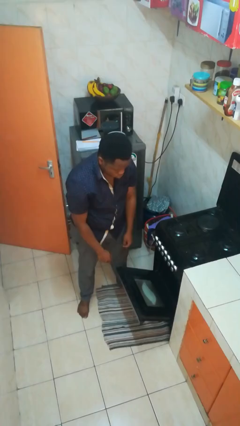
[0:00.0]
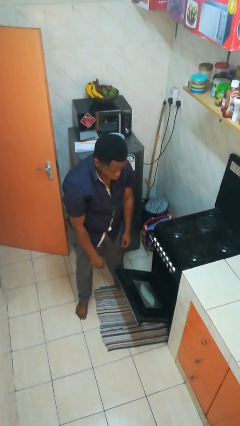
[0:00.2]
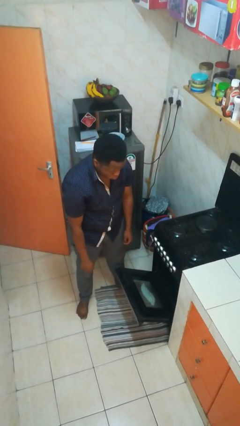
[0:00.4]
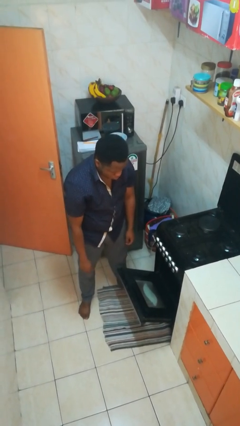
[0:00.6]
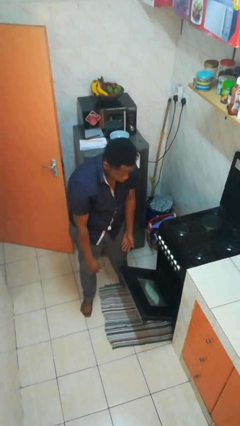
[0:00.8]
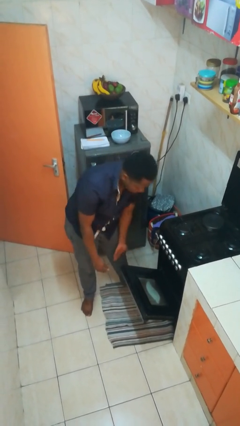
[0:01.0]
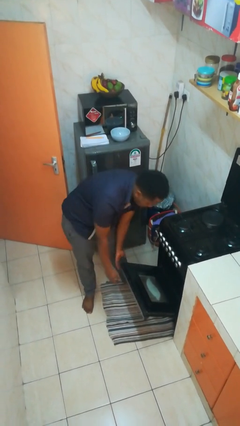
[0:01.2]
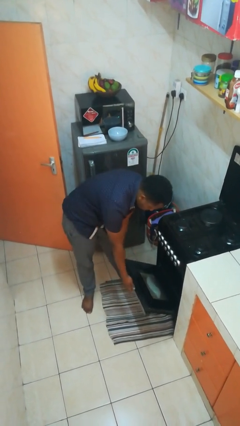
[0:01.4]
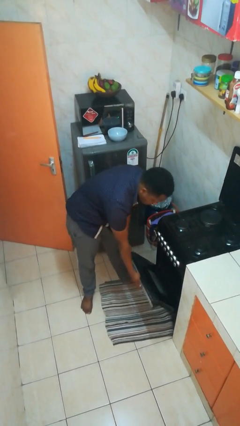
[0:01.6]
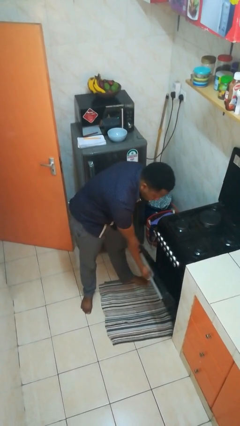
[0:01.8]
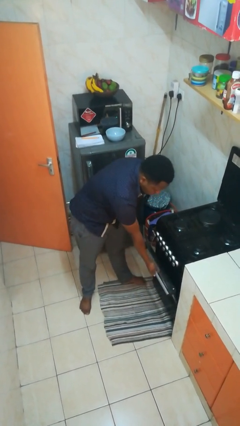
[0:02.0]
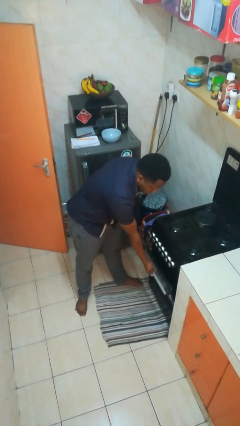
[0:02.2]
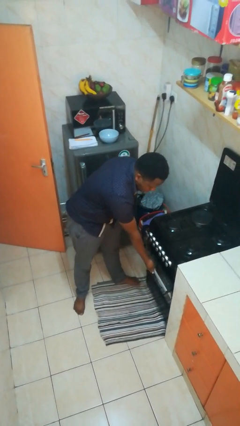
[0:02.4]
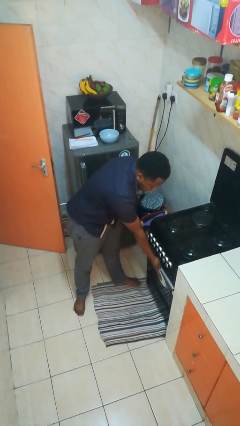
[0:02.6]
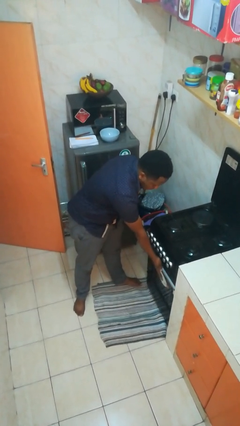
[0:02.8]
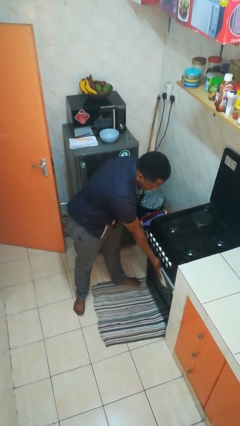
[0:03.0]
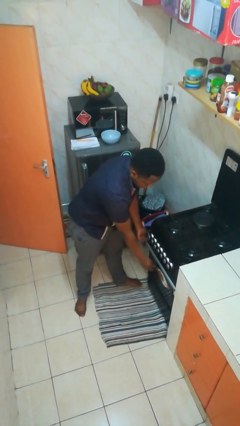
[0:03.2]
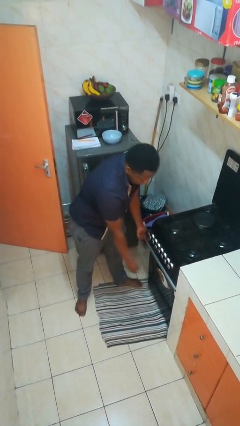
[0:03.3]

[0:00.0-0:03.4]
person closes oven door

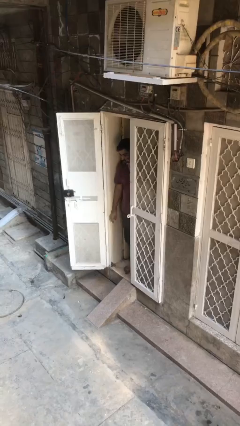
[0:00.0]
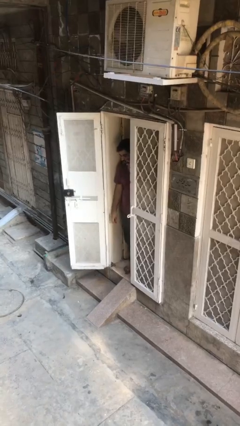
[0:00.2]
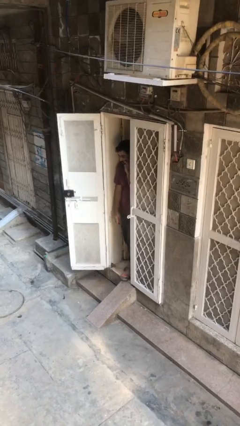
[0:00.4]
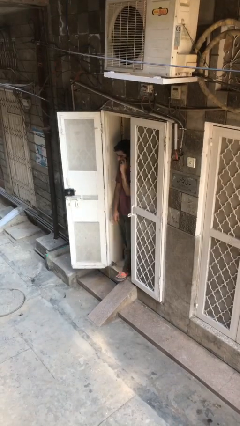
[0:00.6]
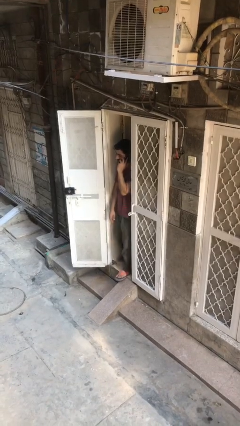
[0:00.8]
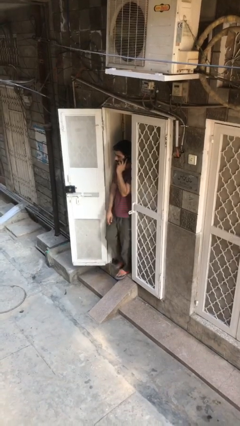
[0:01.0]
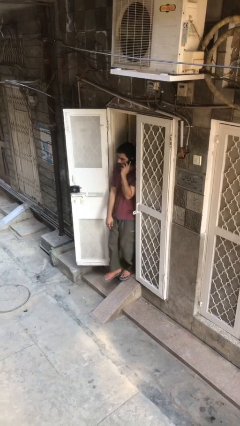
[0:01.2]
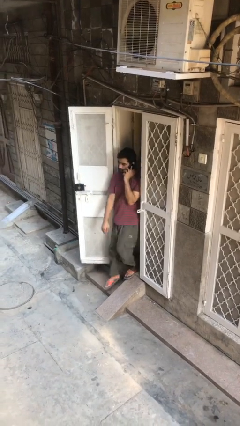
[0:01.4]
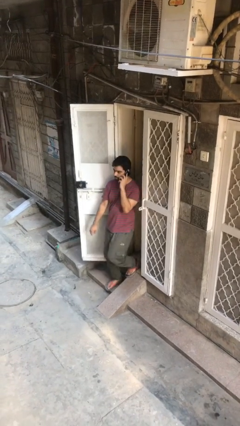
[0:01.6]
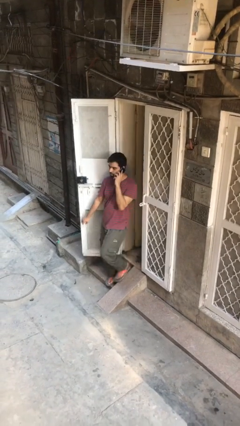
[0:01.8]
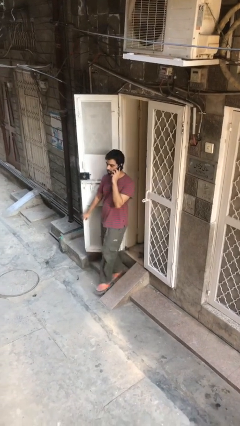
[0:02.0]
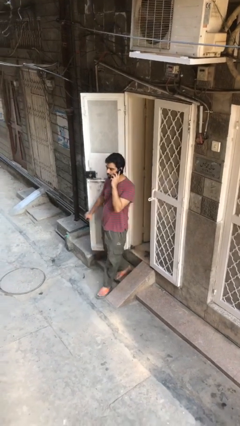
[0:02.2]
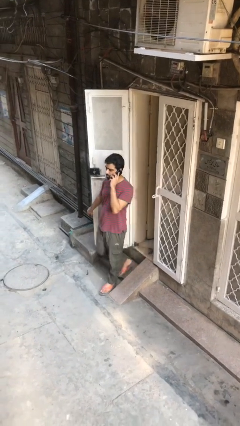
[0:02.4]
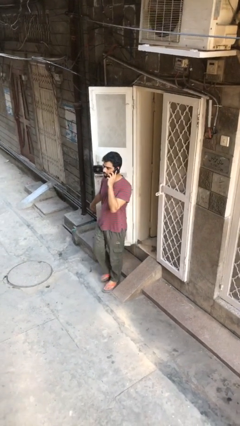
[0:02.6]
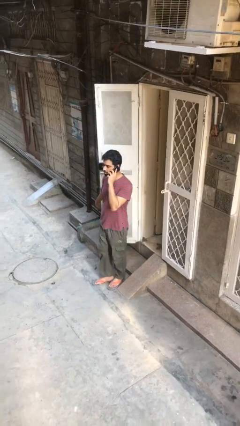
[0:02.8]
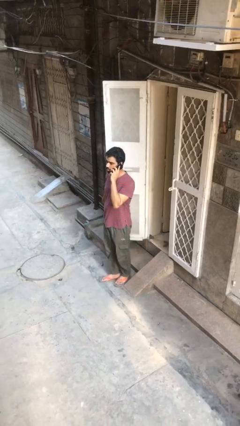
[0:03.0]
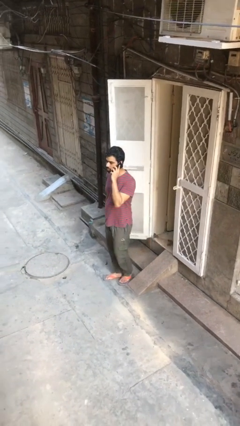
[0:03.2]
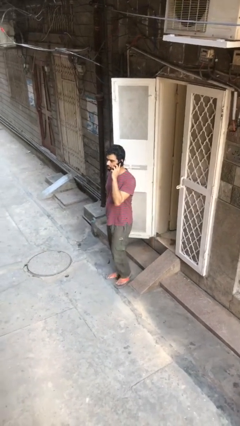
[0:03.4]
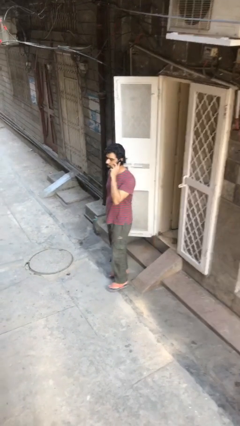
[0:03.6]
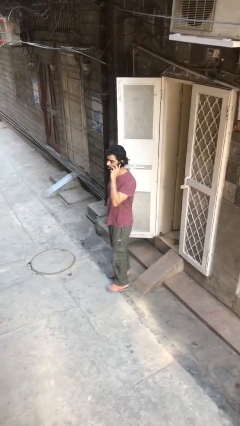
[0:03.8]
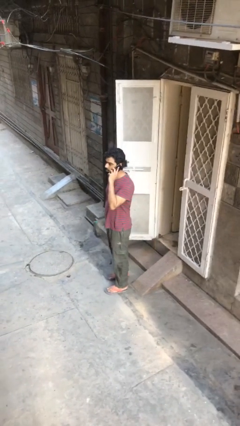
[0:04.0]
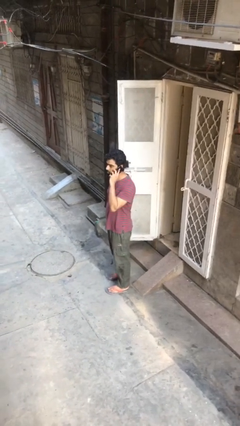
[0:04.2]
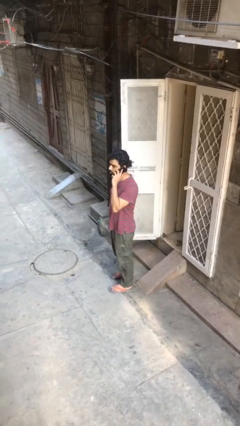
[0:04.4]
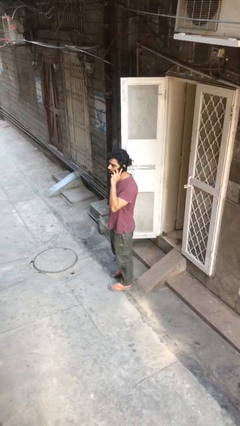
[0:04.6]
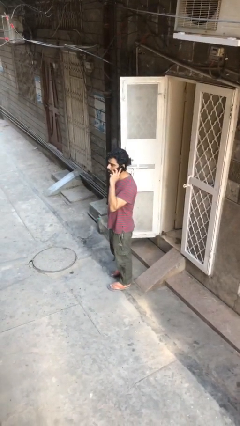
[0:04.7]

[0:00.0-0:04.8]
person enters scene through structure

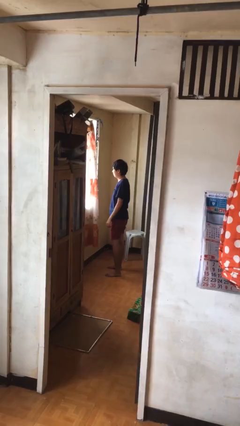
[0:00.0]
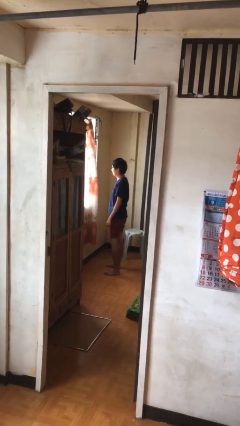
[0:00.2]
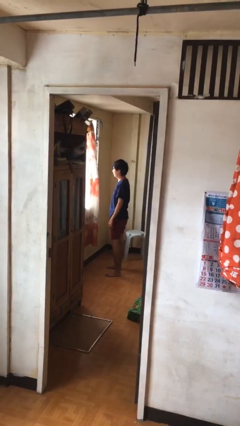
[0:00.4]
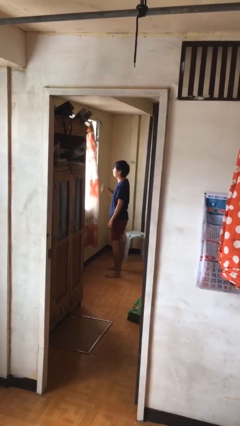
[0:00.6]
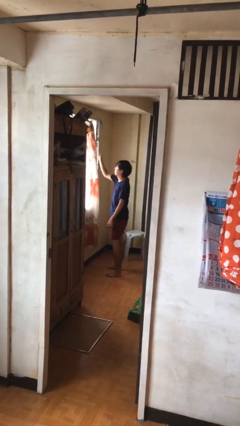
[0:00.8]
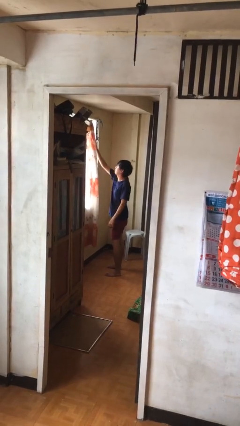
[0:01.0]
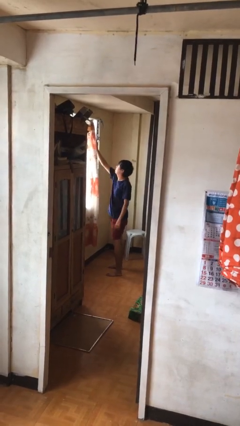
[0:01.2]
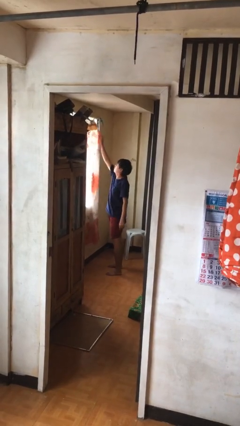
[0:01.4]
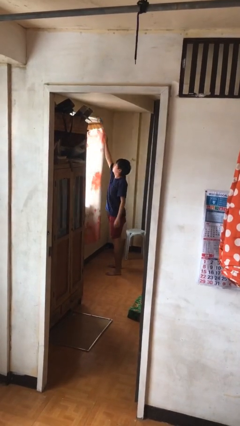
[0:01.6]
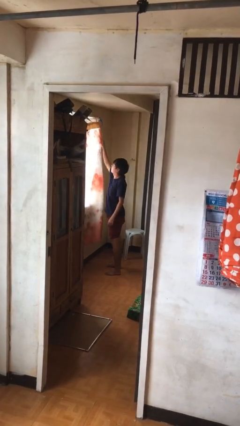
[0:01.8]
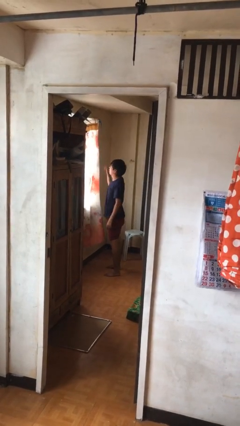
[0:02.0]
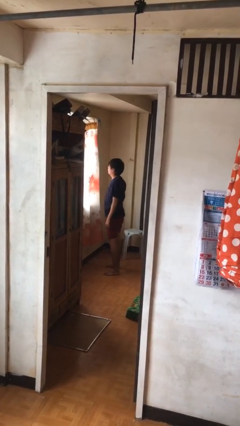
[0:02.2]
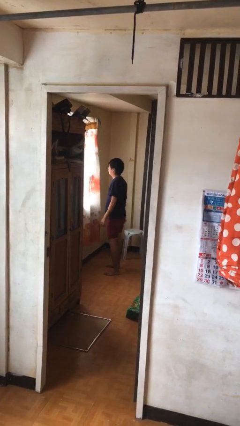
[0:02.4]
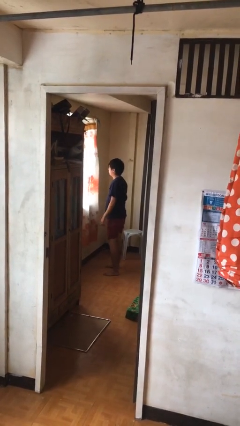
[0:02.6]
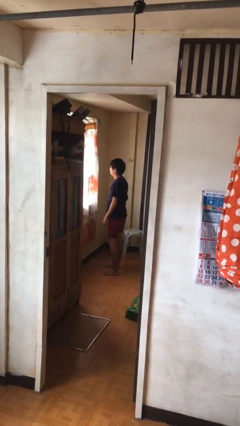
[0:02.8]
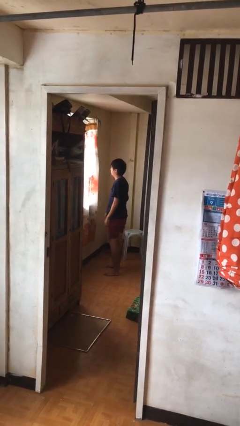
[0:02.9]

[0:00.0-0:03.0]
person closes curtains

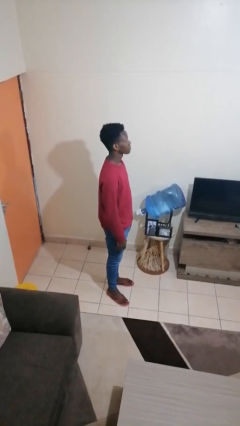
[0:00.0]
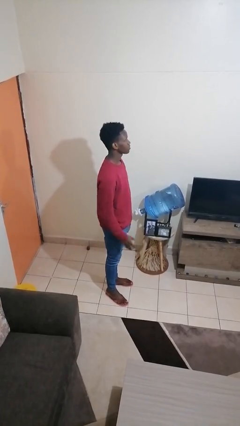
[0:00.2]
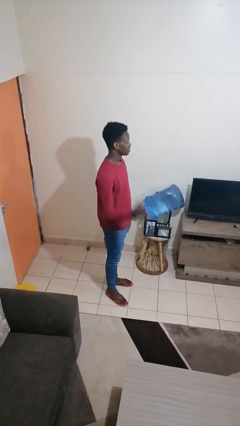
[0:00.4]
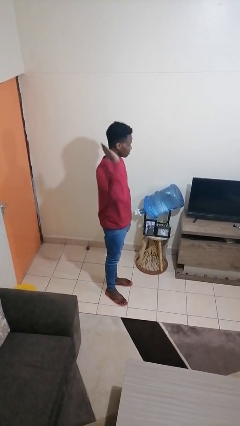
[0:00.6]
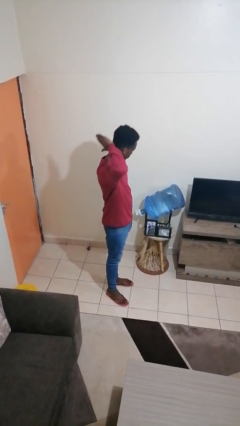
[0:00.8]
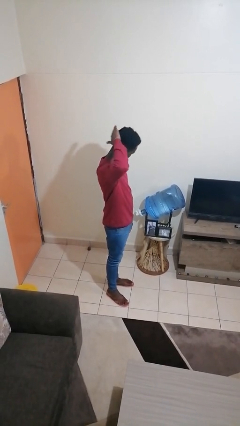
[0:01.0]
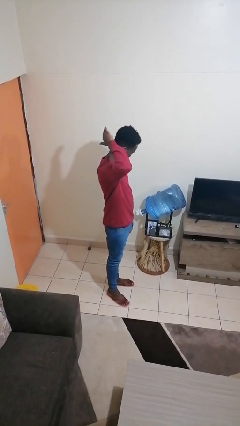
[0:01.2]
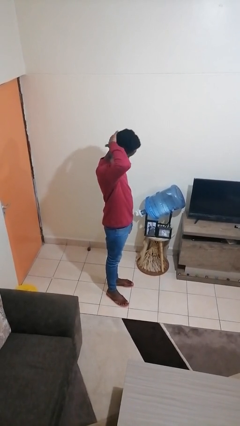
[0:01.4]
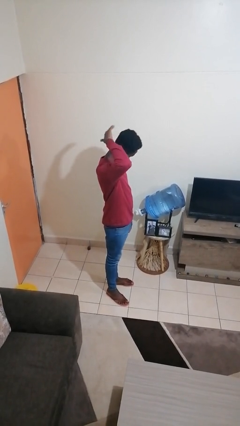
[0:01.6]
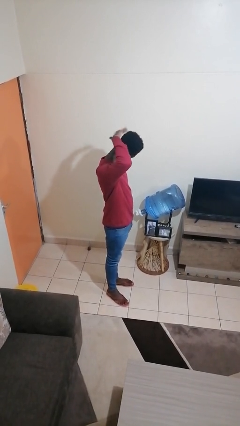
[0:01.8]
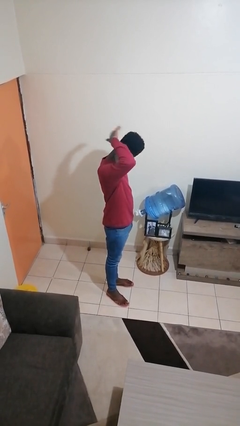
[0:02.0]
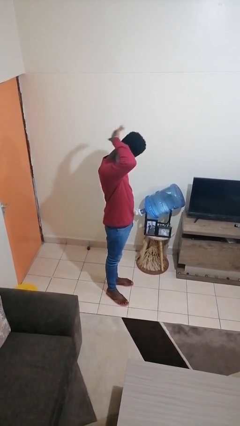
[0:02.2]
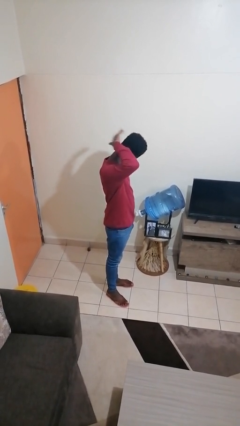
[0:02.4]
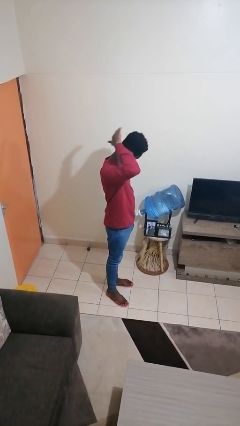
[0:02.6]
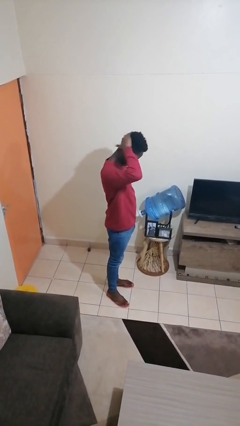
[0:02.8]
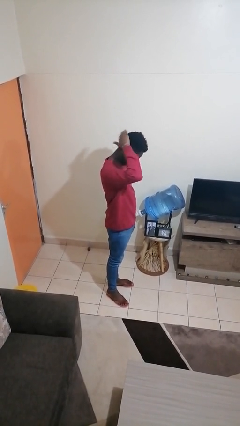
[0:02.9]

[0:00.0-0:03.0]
person pats head

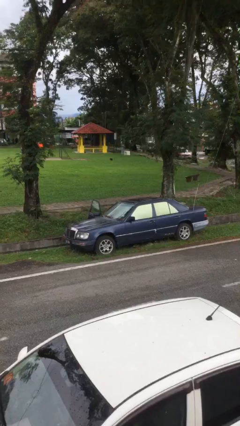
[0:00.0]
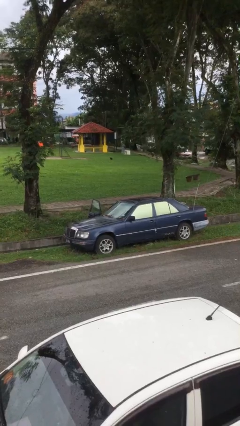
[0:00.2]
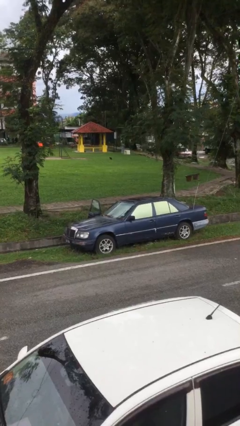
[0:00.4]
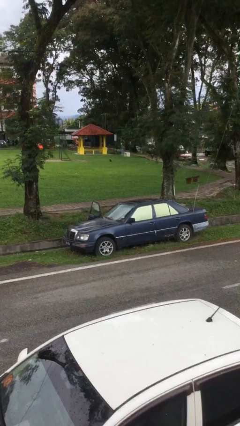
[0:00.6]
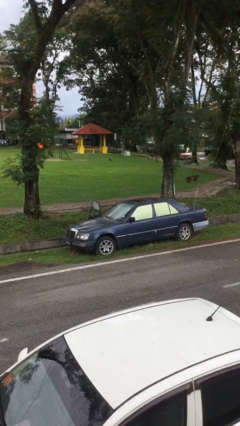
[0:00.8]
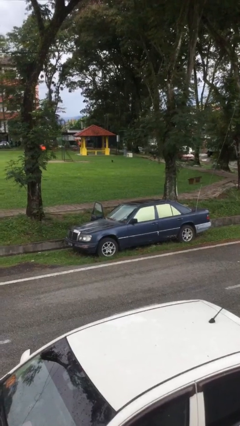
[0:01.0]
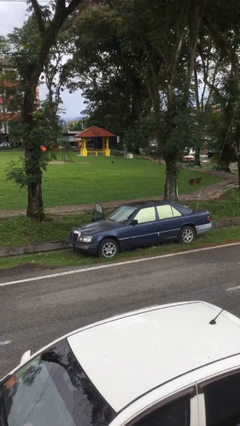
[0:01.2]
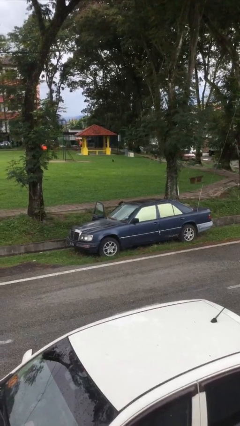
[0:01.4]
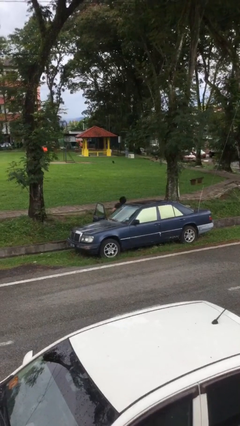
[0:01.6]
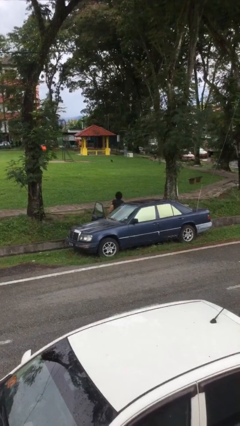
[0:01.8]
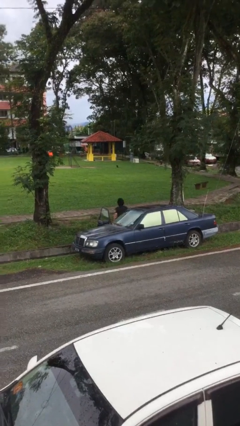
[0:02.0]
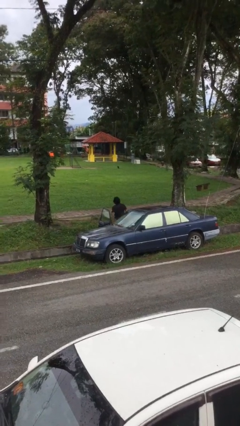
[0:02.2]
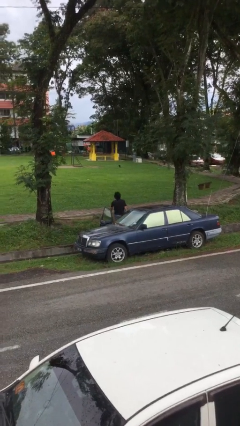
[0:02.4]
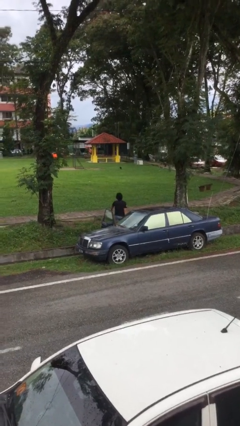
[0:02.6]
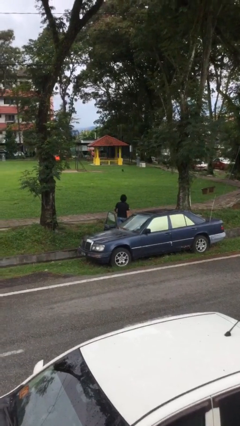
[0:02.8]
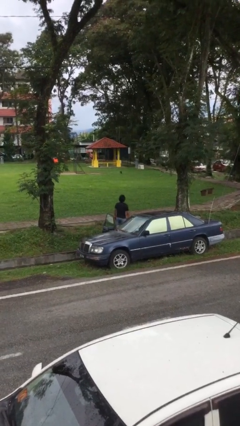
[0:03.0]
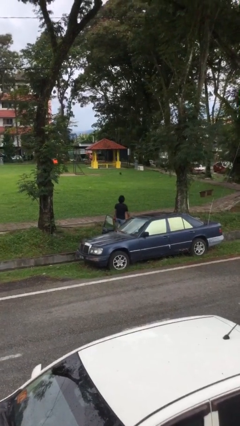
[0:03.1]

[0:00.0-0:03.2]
person exits car
